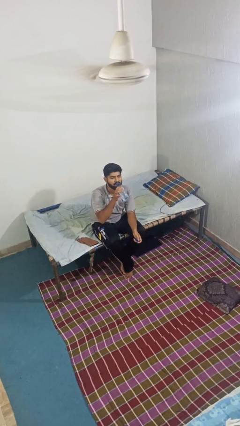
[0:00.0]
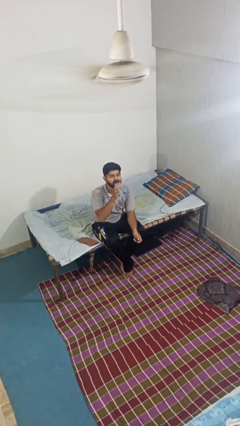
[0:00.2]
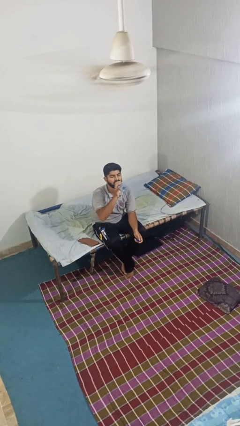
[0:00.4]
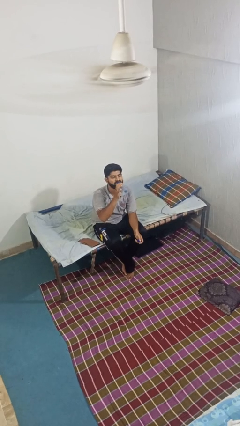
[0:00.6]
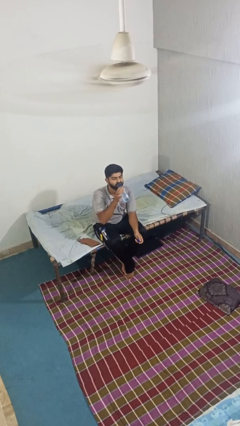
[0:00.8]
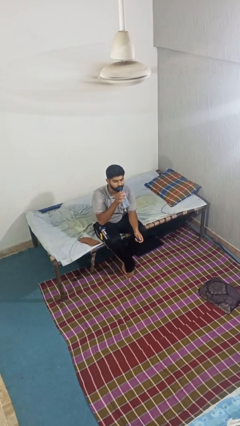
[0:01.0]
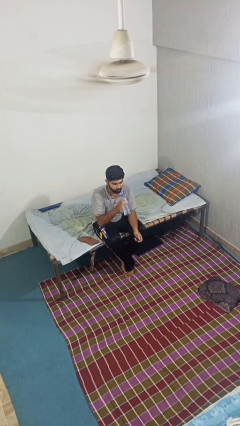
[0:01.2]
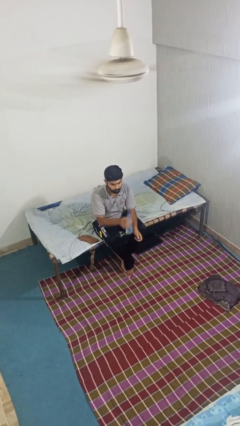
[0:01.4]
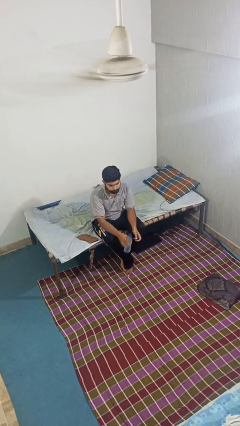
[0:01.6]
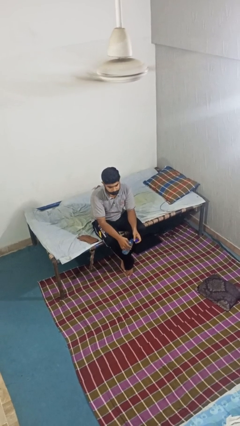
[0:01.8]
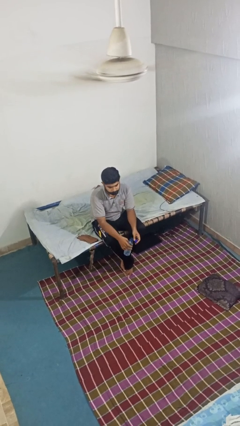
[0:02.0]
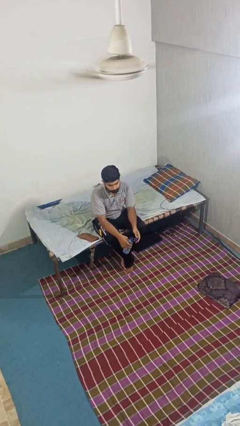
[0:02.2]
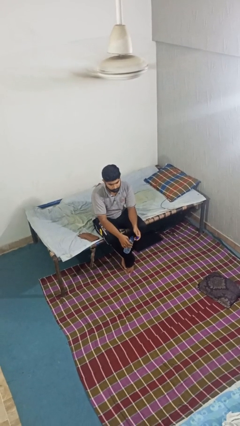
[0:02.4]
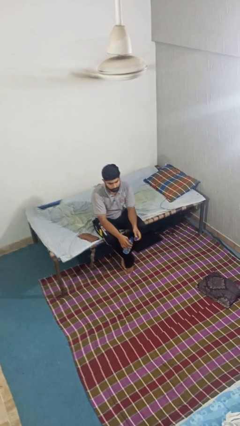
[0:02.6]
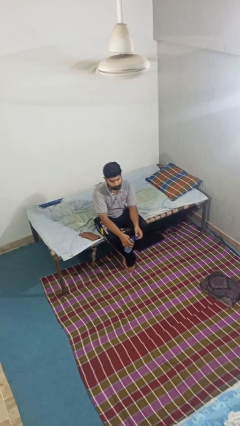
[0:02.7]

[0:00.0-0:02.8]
person drinks from bottle

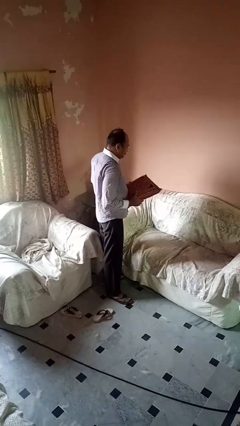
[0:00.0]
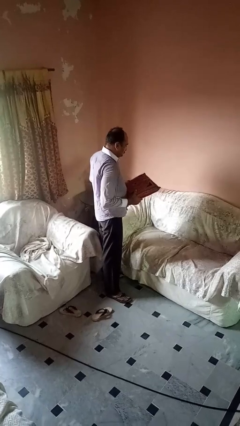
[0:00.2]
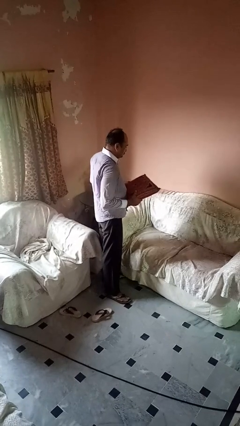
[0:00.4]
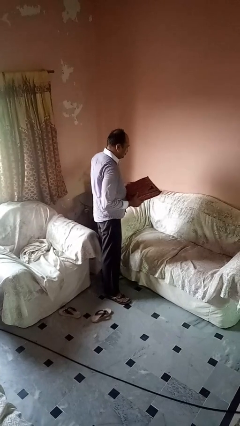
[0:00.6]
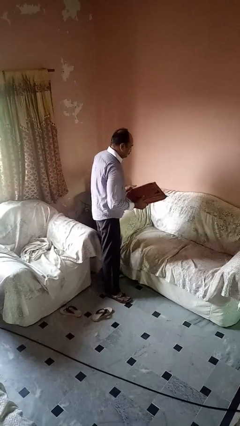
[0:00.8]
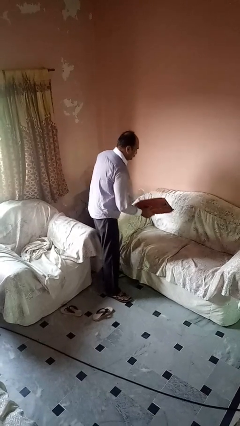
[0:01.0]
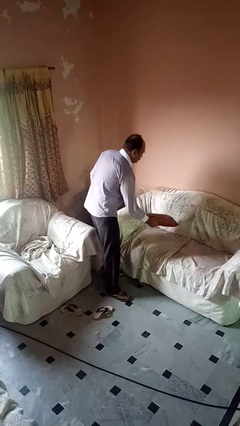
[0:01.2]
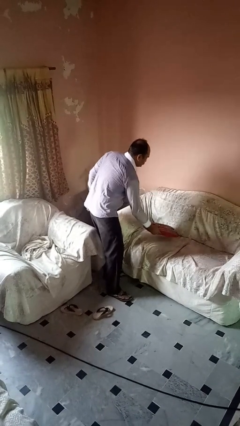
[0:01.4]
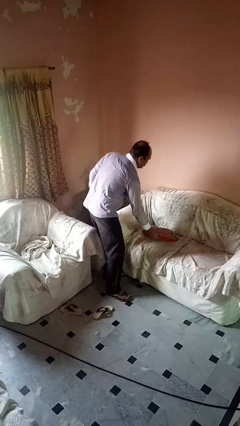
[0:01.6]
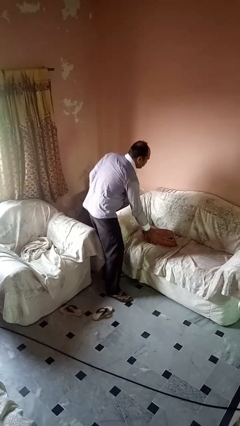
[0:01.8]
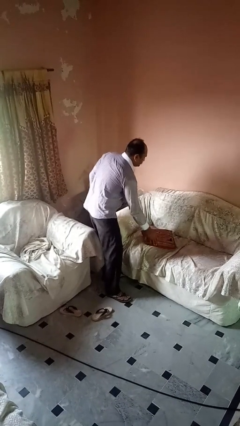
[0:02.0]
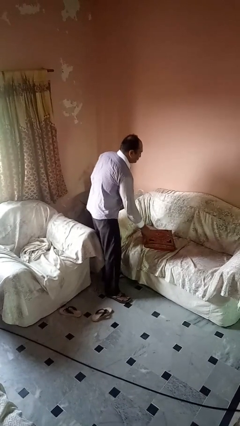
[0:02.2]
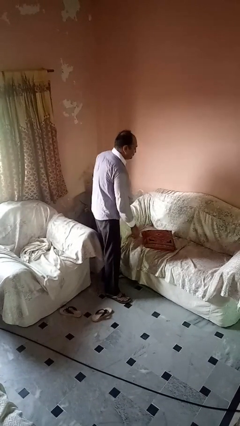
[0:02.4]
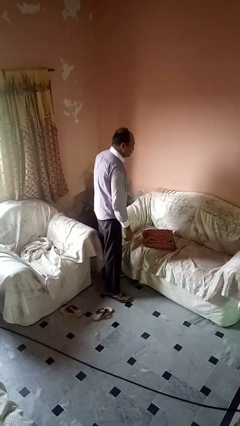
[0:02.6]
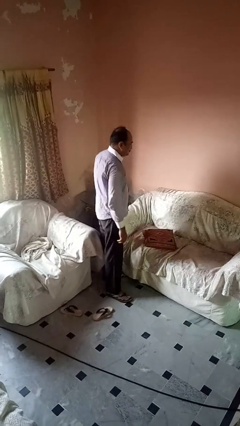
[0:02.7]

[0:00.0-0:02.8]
person puts down object on couch

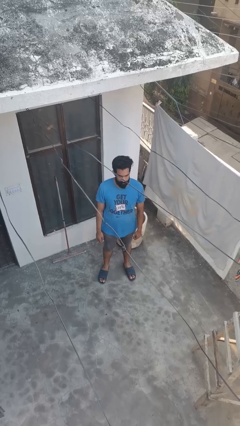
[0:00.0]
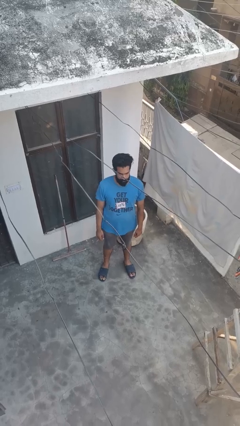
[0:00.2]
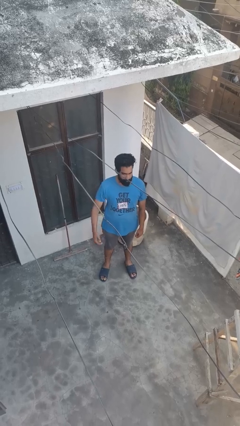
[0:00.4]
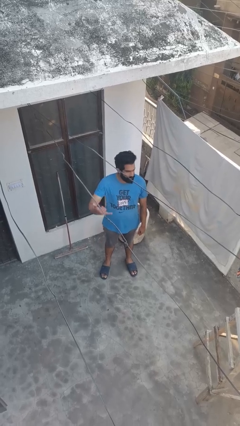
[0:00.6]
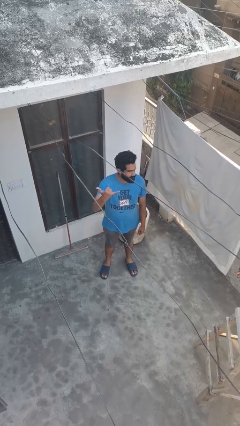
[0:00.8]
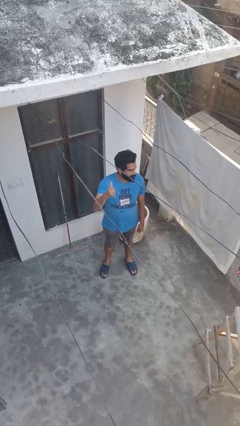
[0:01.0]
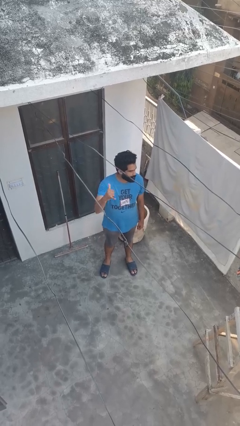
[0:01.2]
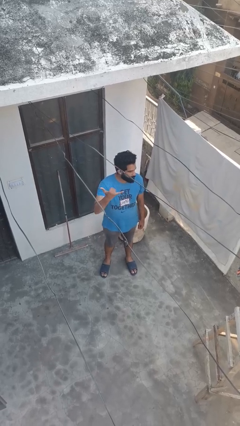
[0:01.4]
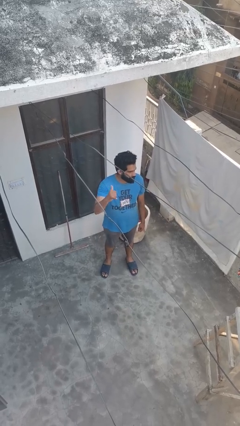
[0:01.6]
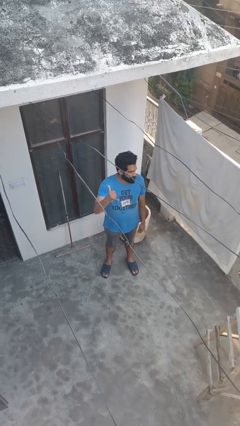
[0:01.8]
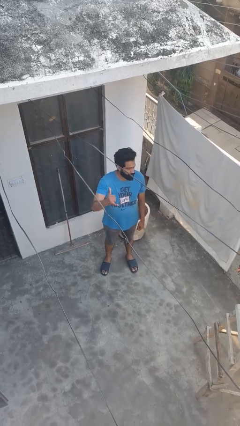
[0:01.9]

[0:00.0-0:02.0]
person gestures hang loose

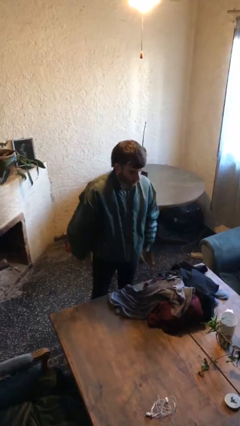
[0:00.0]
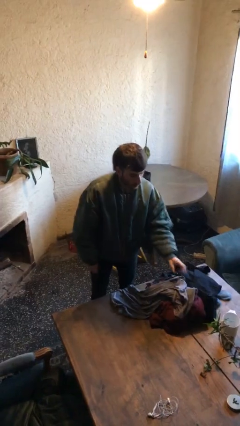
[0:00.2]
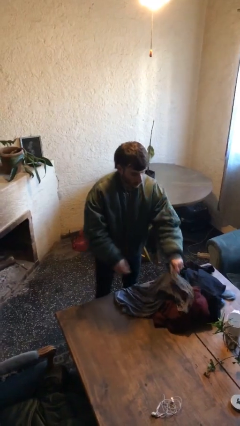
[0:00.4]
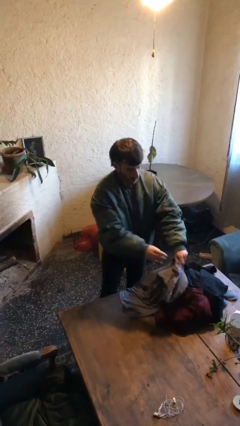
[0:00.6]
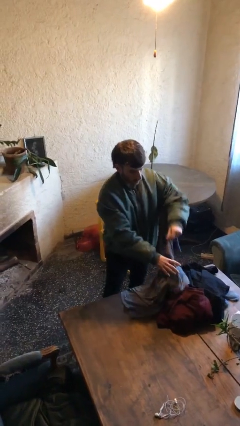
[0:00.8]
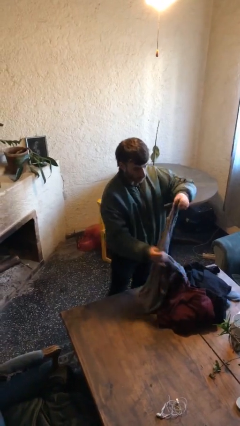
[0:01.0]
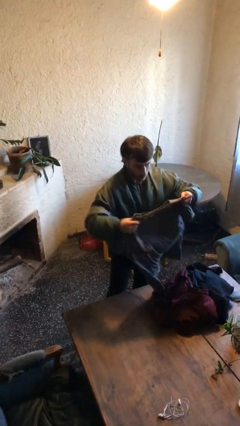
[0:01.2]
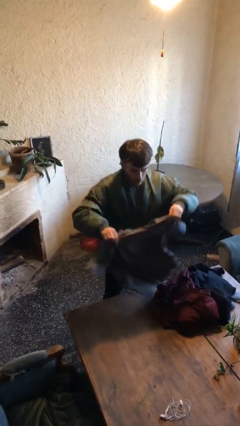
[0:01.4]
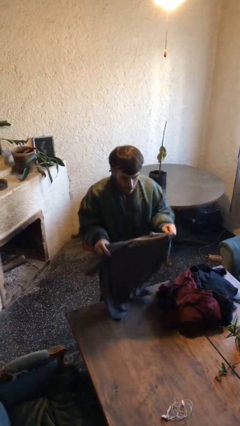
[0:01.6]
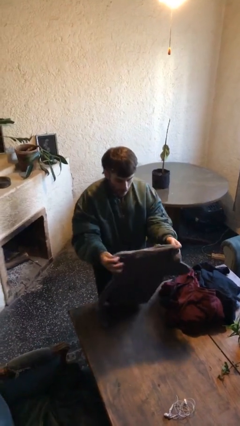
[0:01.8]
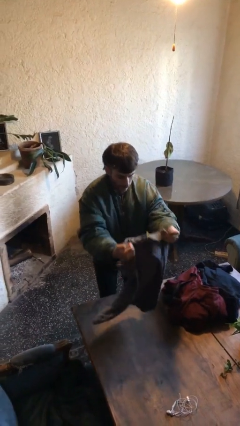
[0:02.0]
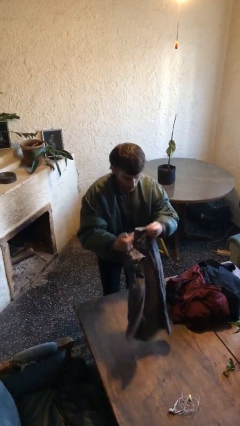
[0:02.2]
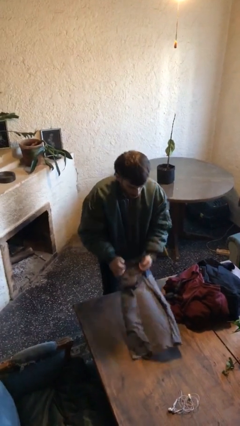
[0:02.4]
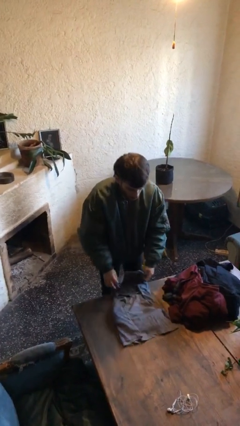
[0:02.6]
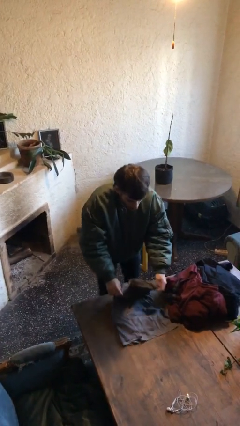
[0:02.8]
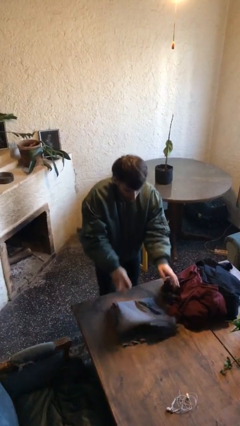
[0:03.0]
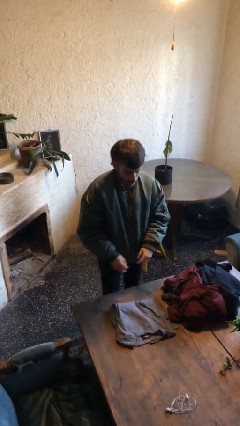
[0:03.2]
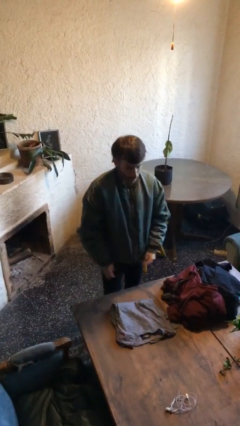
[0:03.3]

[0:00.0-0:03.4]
person folds shirt

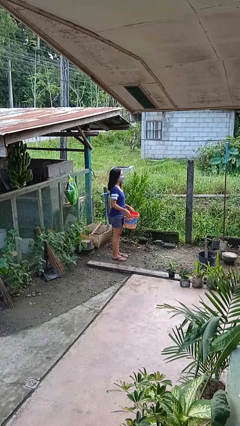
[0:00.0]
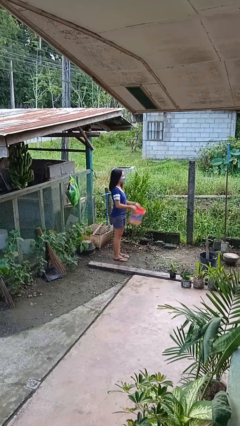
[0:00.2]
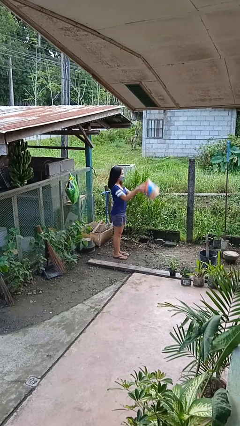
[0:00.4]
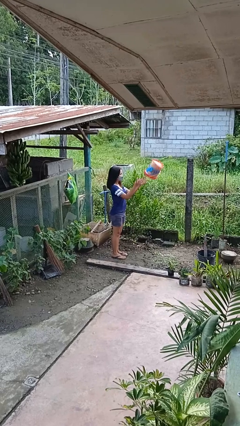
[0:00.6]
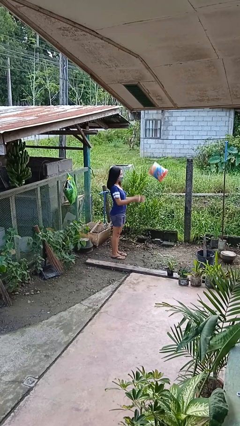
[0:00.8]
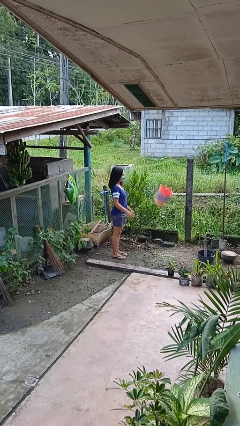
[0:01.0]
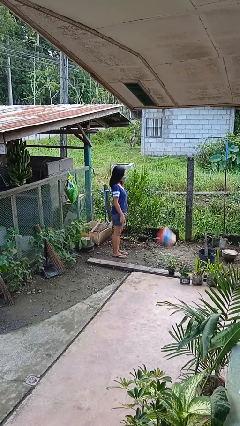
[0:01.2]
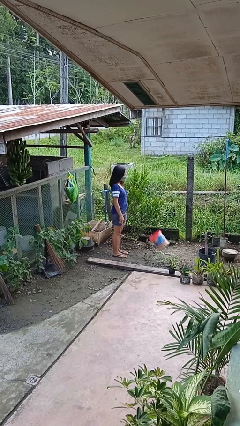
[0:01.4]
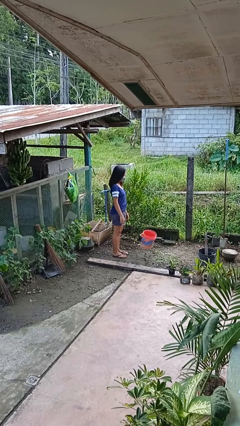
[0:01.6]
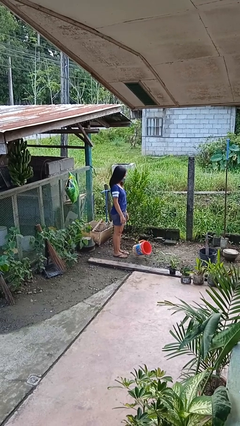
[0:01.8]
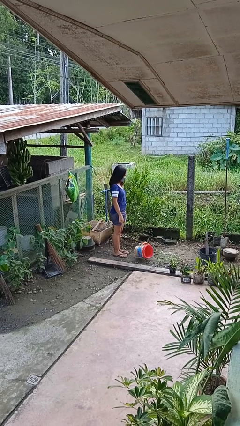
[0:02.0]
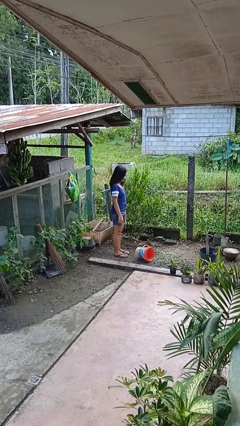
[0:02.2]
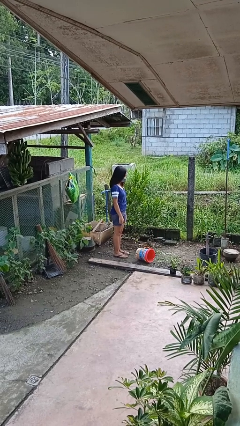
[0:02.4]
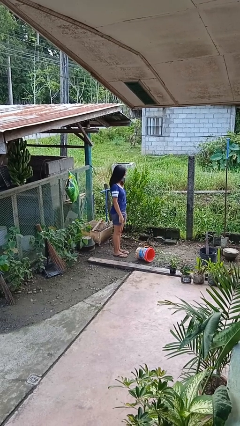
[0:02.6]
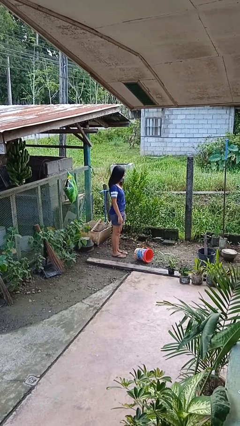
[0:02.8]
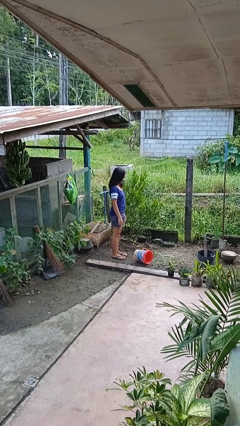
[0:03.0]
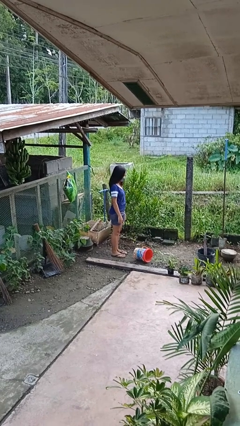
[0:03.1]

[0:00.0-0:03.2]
person throws object into air

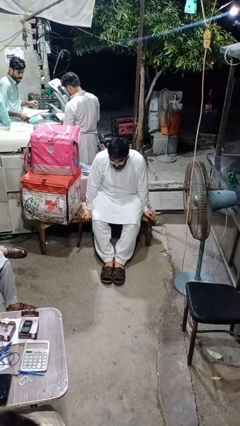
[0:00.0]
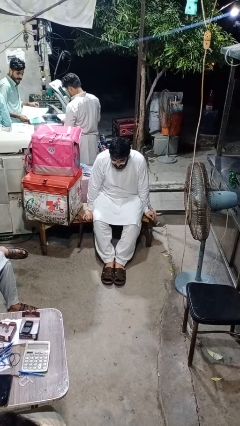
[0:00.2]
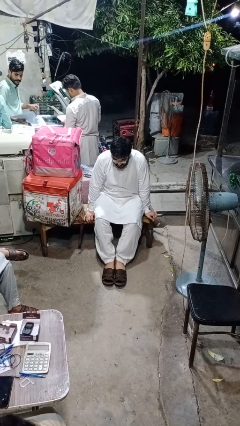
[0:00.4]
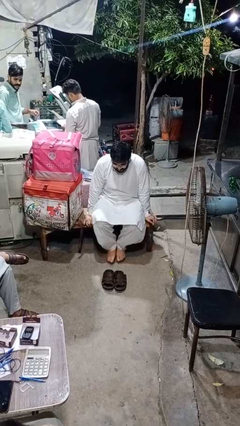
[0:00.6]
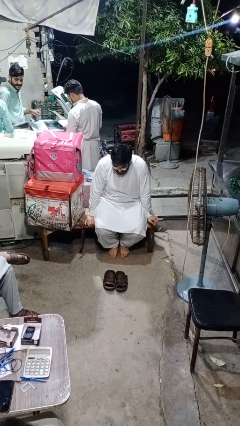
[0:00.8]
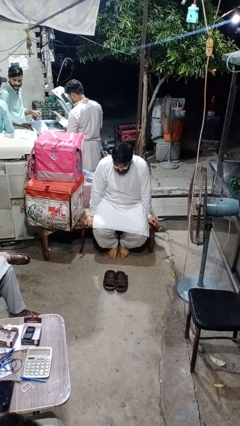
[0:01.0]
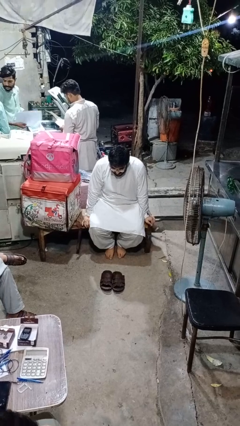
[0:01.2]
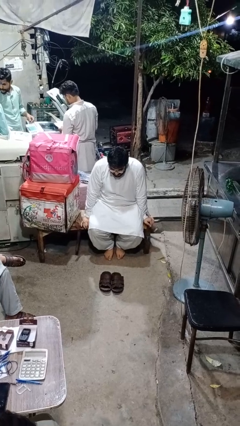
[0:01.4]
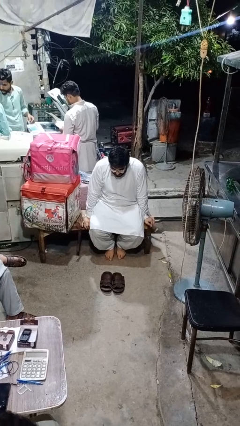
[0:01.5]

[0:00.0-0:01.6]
person takes off shoes

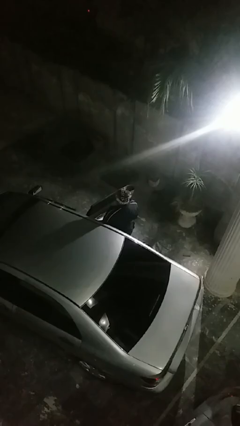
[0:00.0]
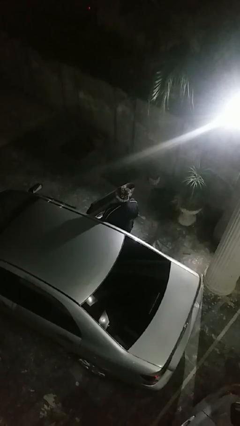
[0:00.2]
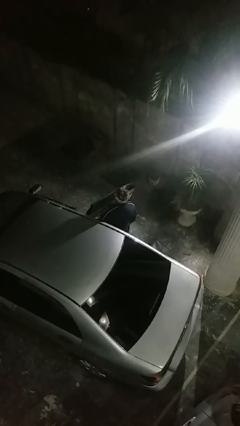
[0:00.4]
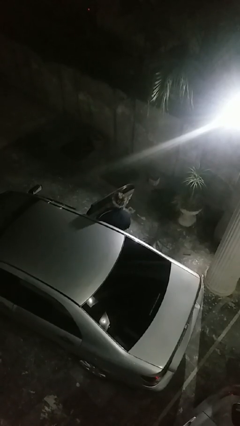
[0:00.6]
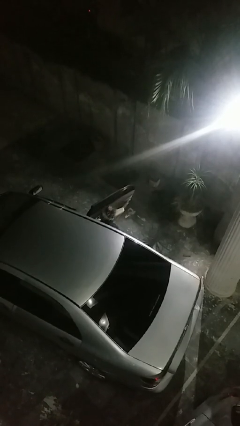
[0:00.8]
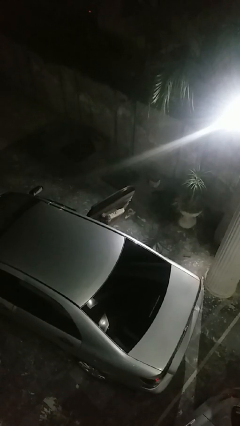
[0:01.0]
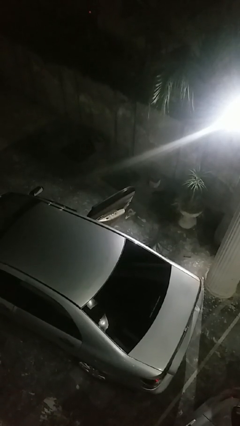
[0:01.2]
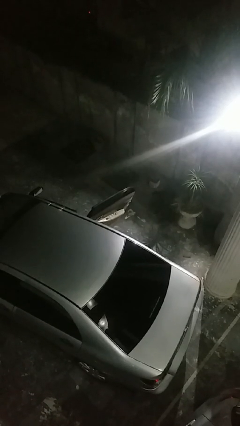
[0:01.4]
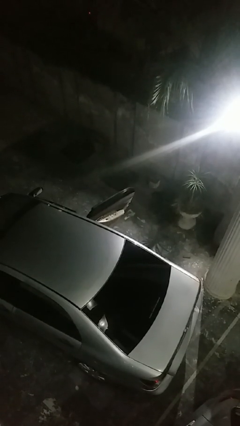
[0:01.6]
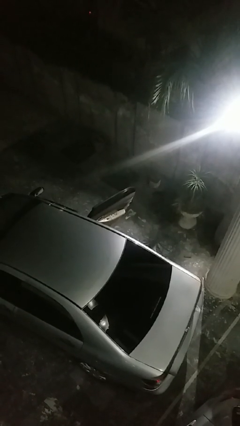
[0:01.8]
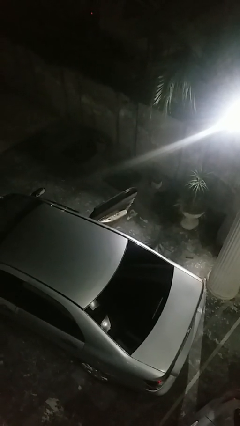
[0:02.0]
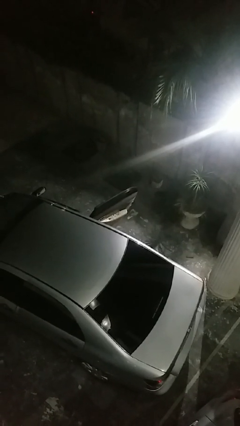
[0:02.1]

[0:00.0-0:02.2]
person enters car
